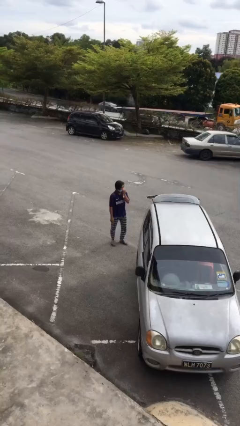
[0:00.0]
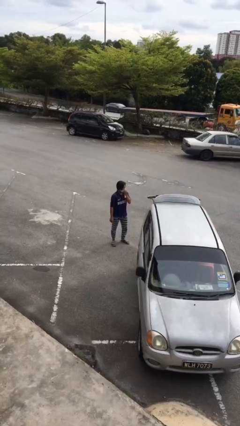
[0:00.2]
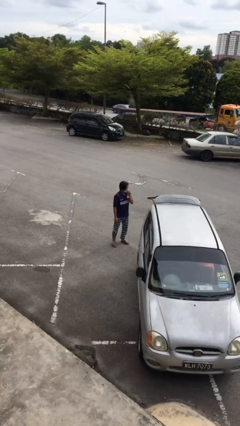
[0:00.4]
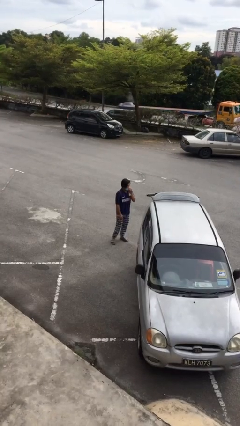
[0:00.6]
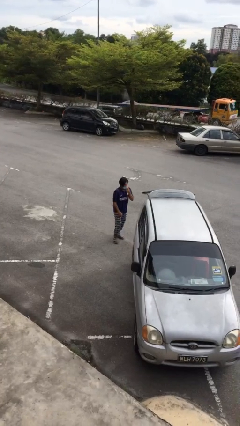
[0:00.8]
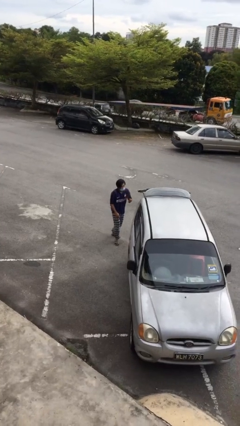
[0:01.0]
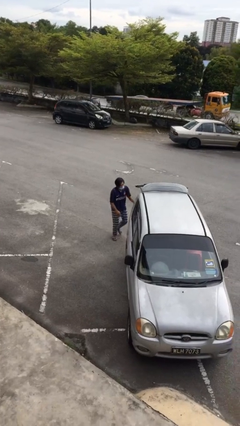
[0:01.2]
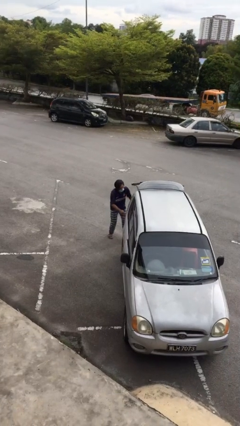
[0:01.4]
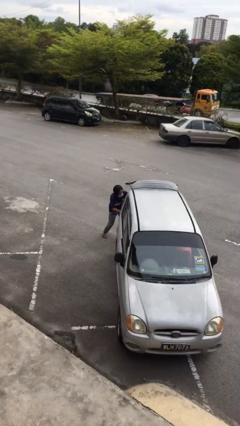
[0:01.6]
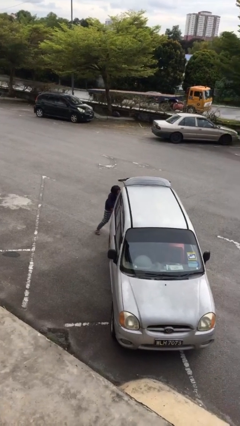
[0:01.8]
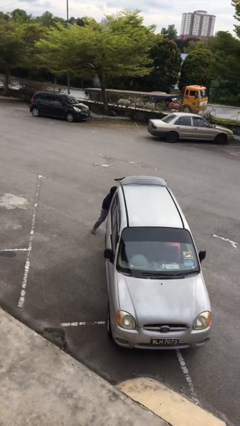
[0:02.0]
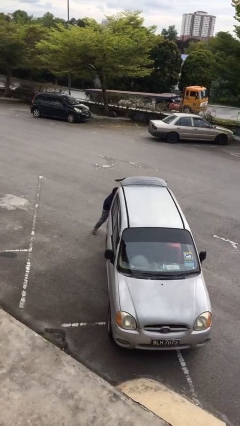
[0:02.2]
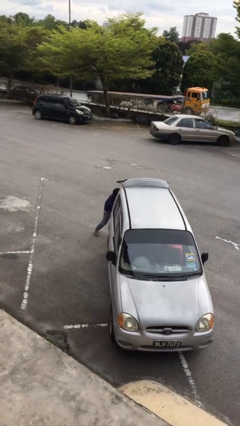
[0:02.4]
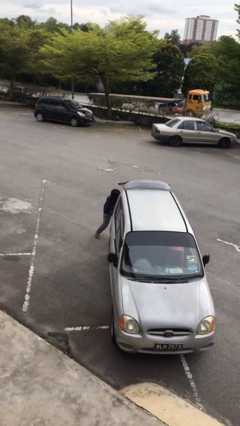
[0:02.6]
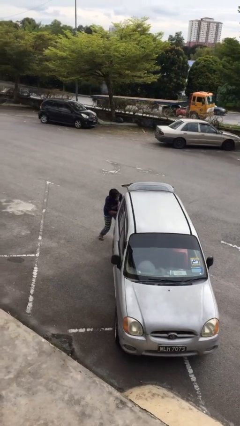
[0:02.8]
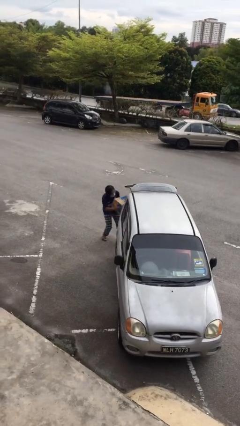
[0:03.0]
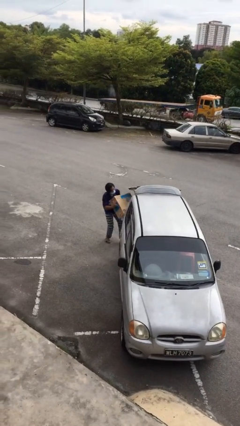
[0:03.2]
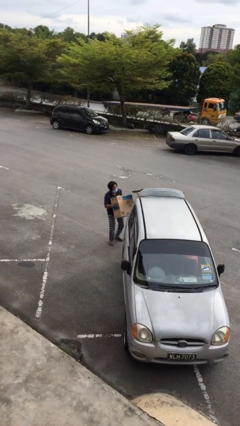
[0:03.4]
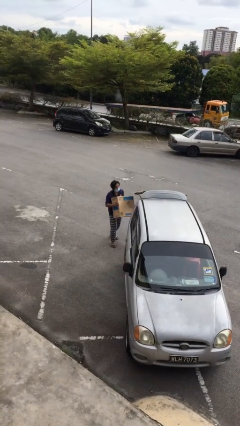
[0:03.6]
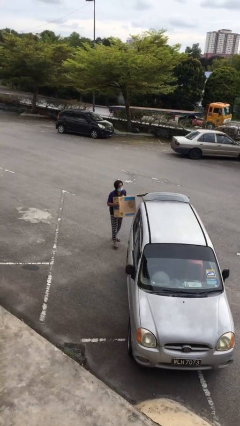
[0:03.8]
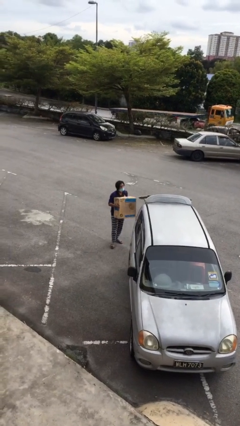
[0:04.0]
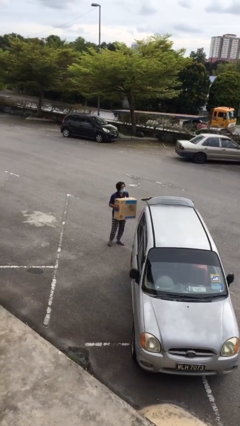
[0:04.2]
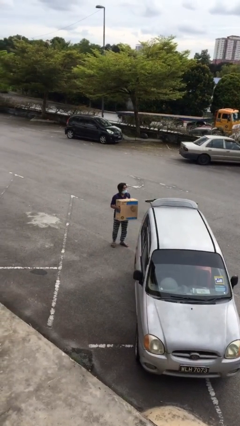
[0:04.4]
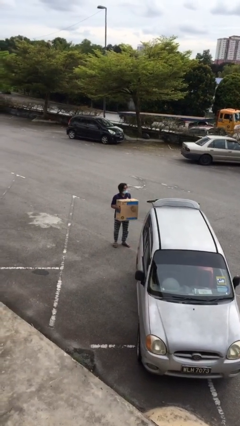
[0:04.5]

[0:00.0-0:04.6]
person unloads car

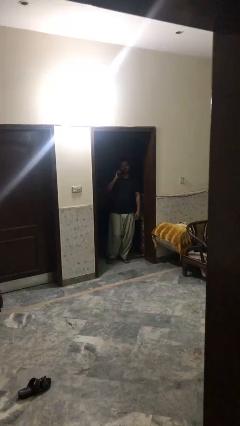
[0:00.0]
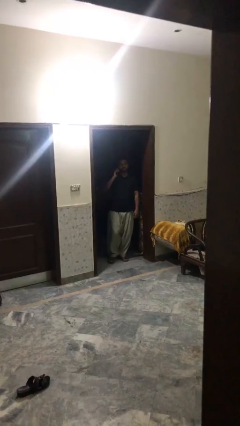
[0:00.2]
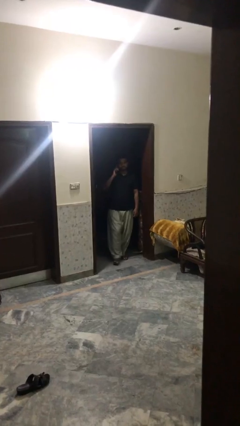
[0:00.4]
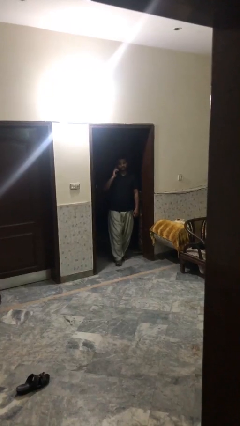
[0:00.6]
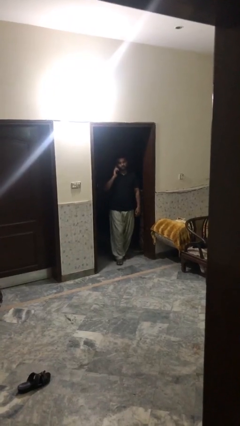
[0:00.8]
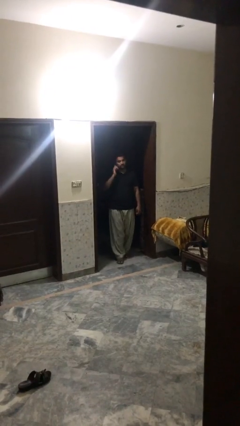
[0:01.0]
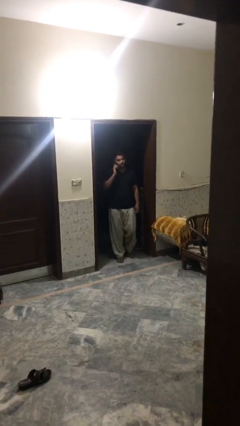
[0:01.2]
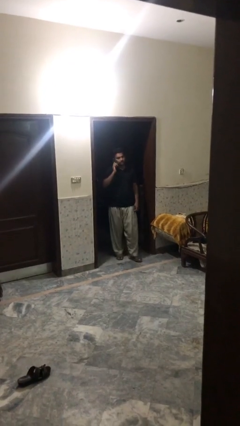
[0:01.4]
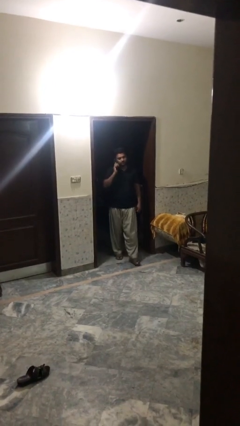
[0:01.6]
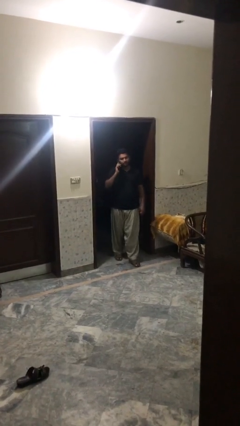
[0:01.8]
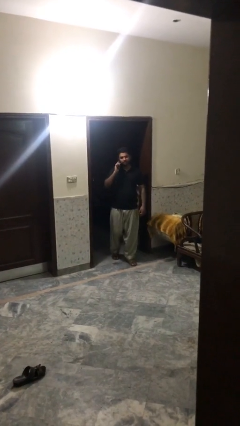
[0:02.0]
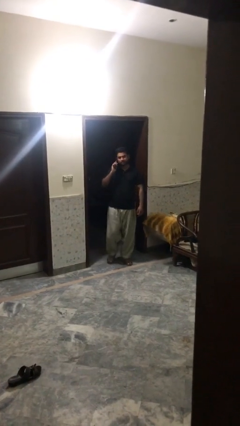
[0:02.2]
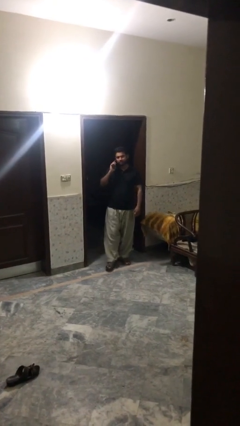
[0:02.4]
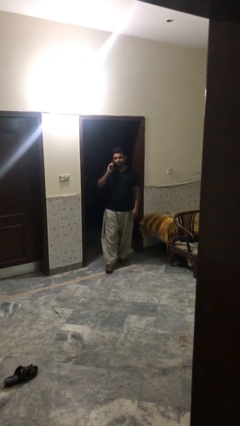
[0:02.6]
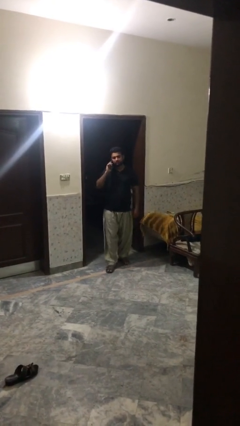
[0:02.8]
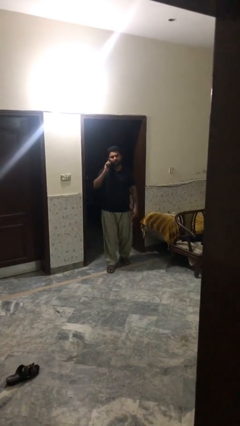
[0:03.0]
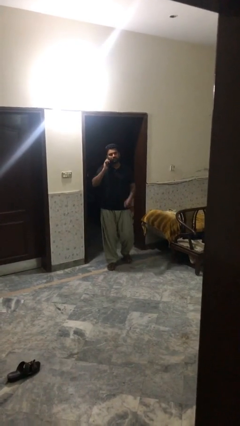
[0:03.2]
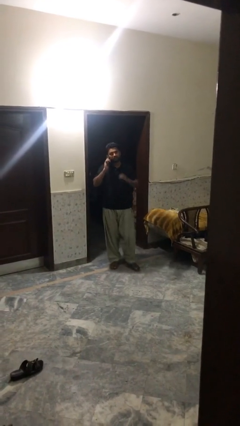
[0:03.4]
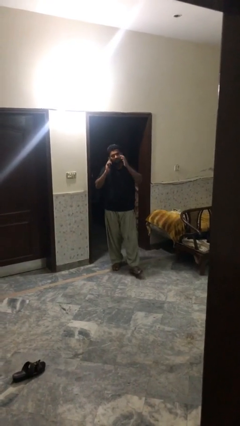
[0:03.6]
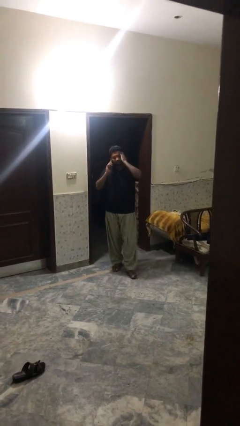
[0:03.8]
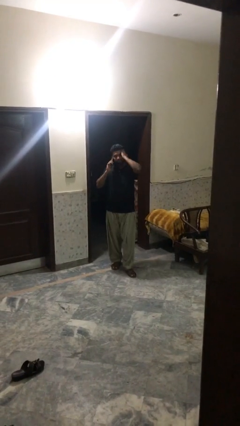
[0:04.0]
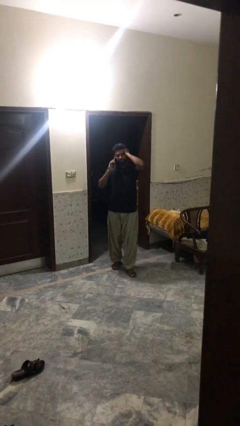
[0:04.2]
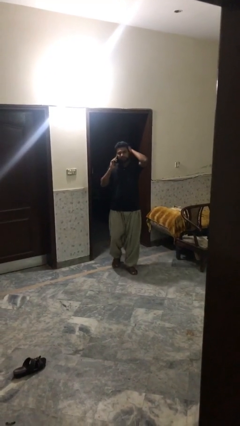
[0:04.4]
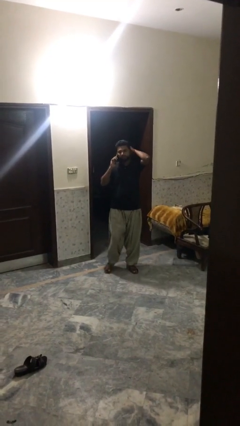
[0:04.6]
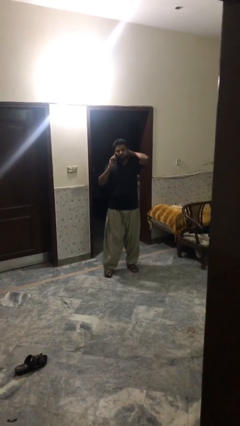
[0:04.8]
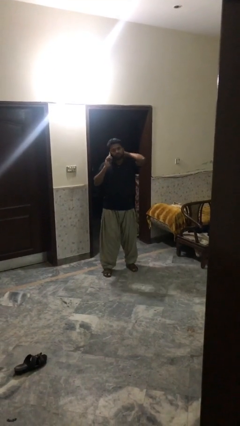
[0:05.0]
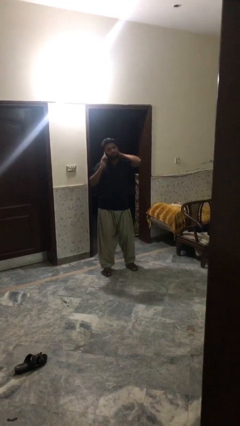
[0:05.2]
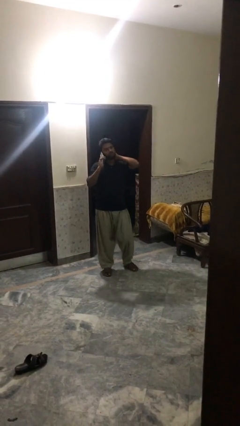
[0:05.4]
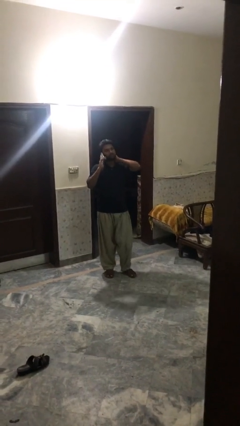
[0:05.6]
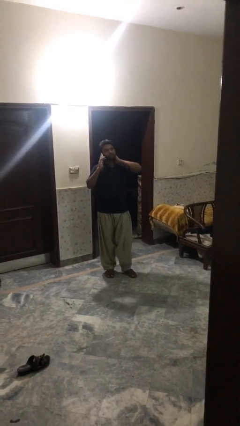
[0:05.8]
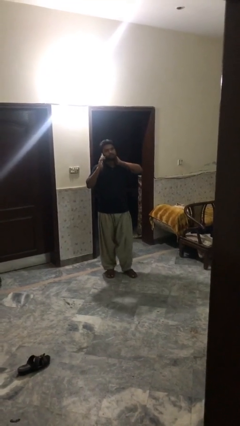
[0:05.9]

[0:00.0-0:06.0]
person enters scene through structure

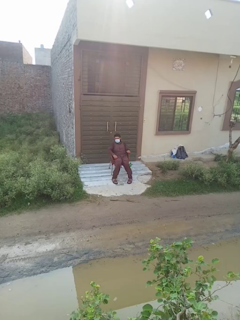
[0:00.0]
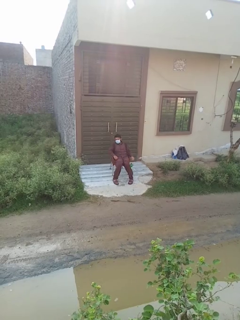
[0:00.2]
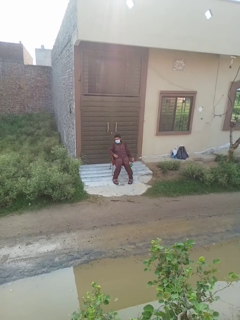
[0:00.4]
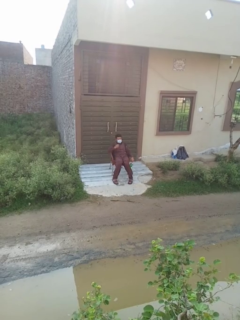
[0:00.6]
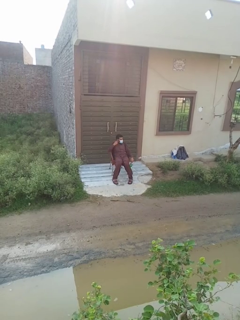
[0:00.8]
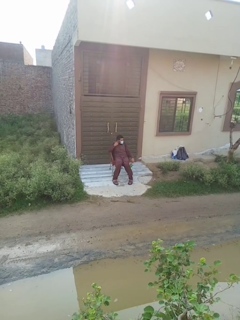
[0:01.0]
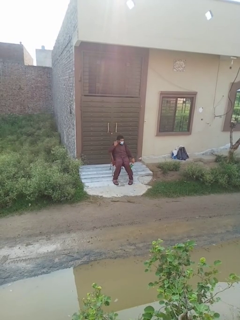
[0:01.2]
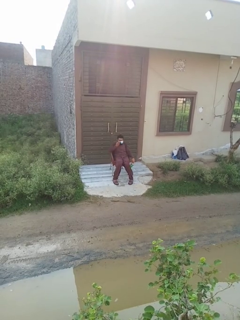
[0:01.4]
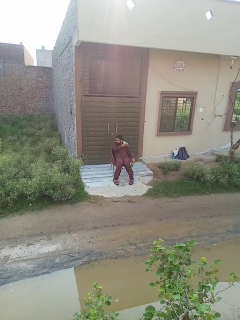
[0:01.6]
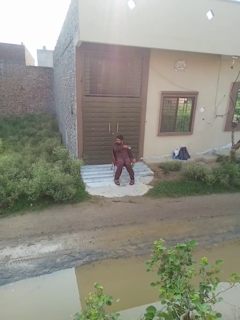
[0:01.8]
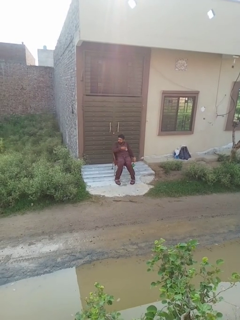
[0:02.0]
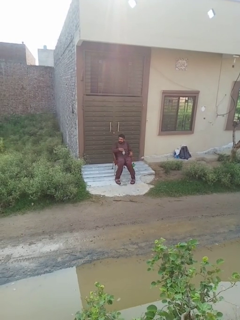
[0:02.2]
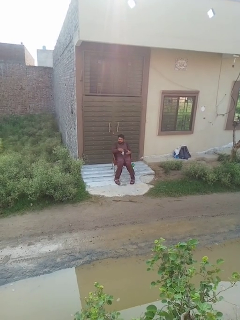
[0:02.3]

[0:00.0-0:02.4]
person takes off facemask

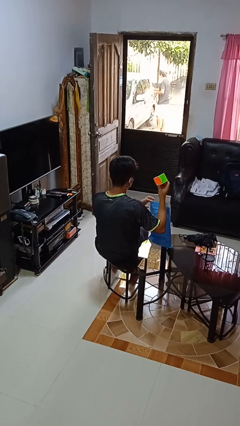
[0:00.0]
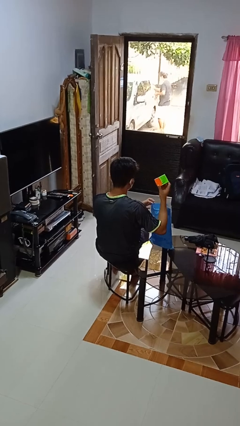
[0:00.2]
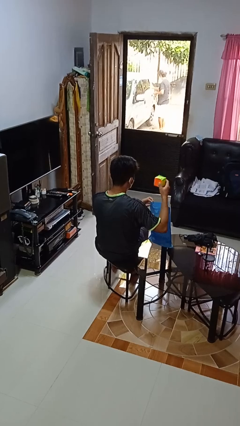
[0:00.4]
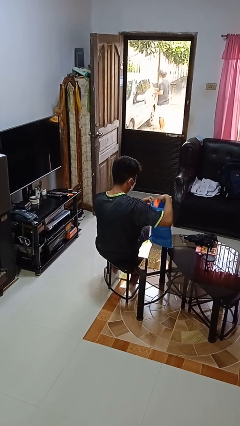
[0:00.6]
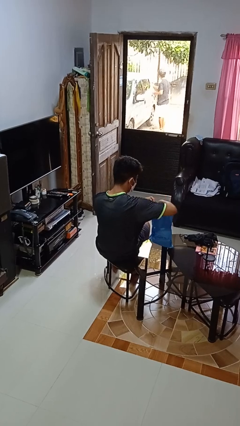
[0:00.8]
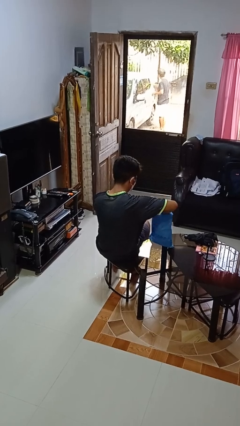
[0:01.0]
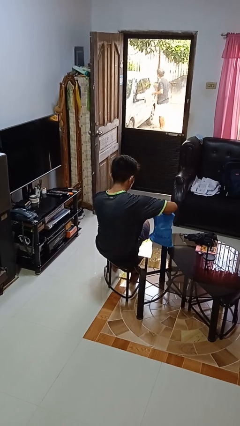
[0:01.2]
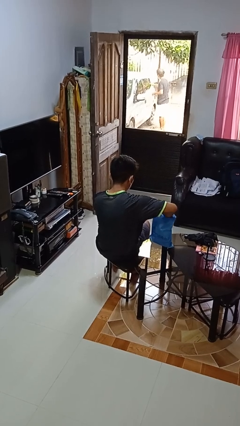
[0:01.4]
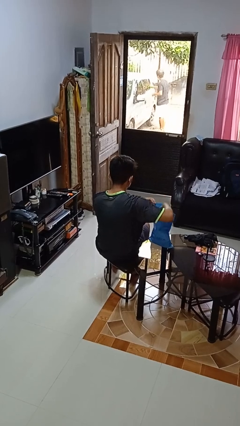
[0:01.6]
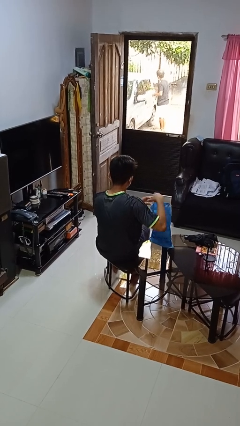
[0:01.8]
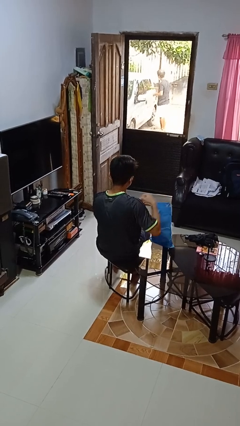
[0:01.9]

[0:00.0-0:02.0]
person puts object into bag

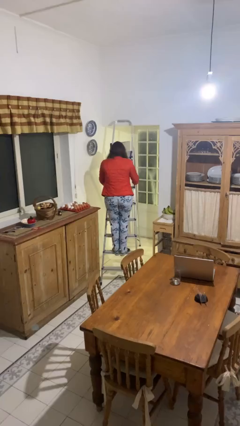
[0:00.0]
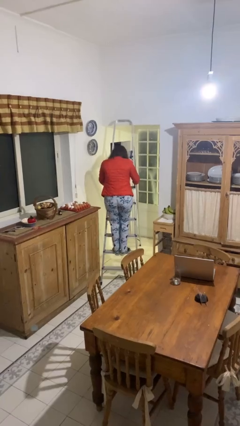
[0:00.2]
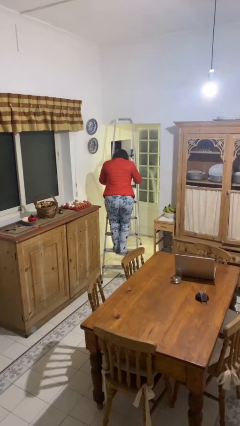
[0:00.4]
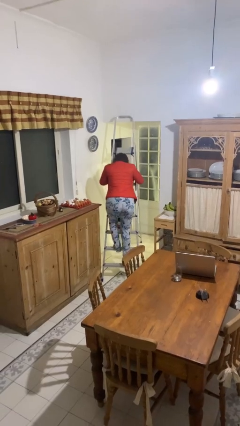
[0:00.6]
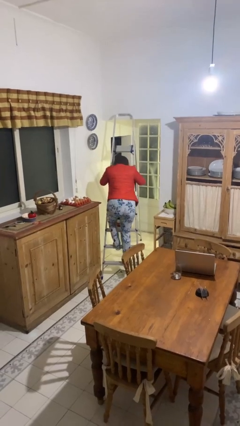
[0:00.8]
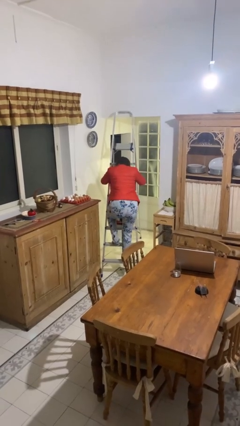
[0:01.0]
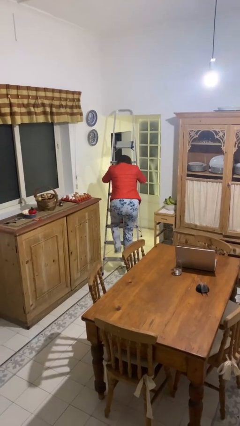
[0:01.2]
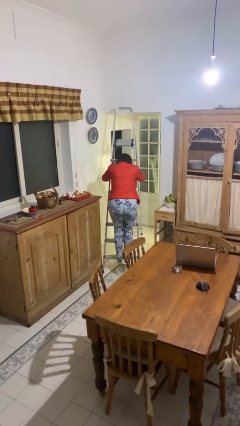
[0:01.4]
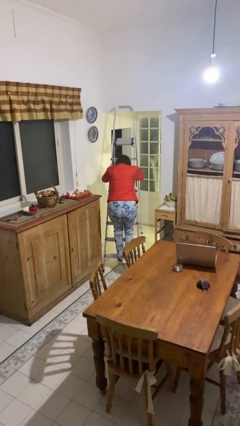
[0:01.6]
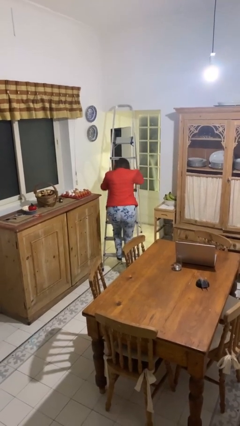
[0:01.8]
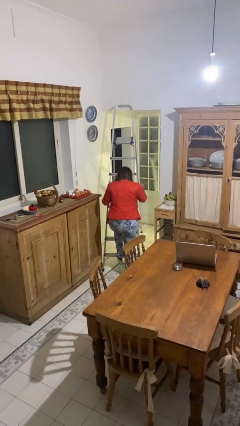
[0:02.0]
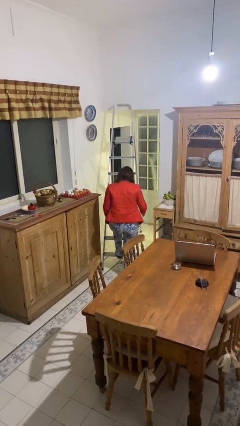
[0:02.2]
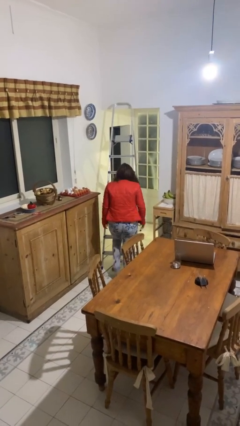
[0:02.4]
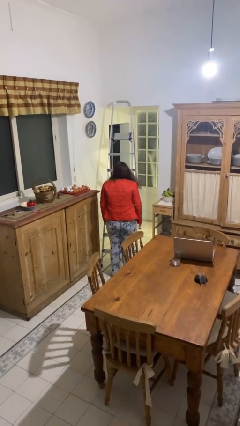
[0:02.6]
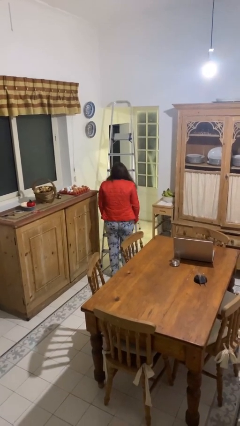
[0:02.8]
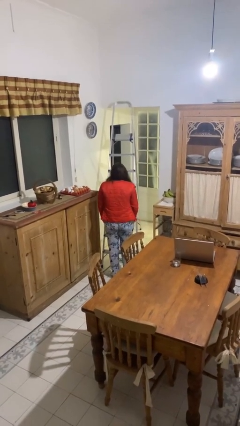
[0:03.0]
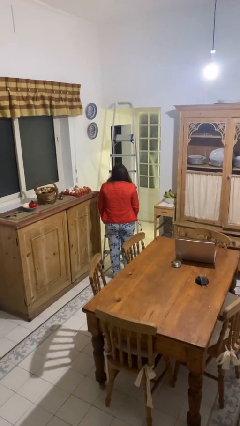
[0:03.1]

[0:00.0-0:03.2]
person climbs down ladder
